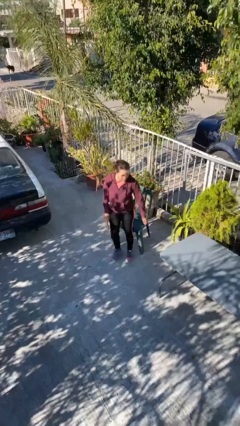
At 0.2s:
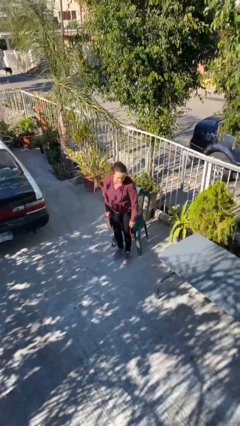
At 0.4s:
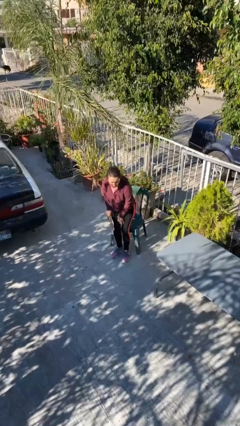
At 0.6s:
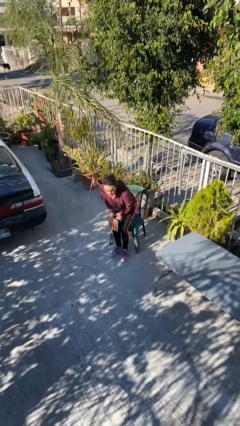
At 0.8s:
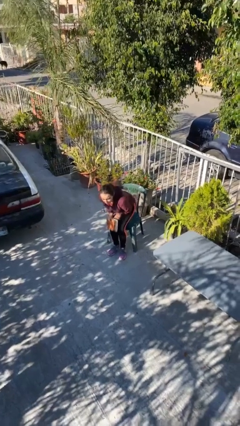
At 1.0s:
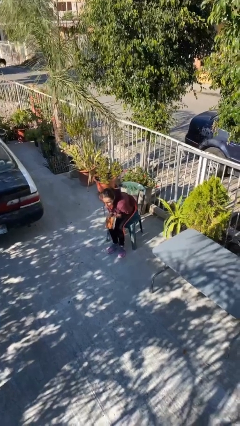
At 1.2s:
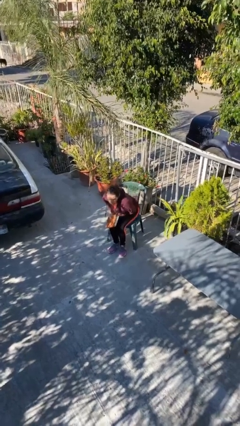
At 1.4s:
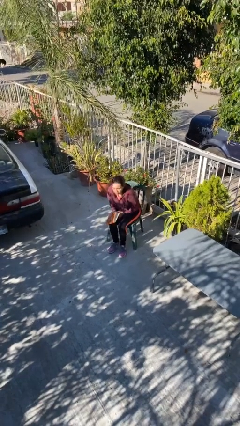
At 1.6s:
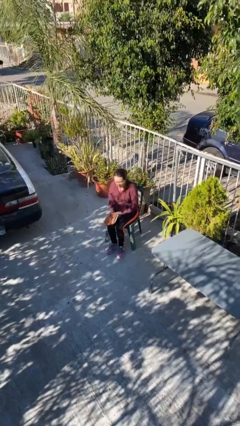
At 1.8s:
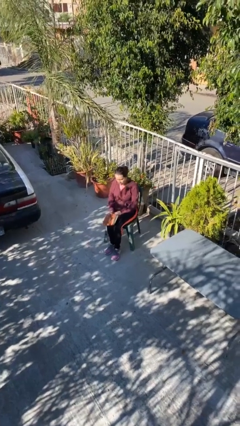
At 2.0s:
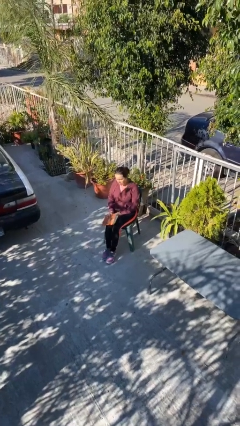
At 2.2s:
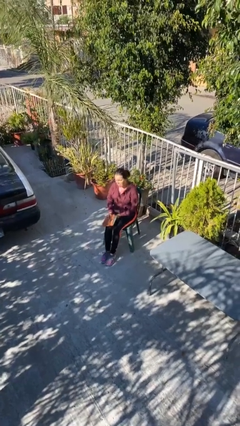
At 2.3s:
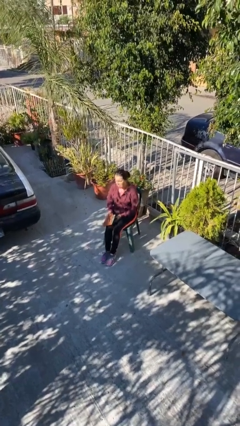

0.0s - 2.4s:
person sits down

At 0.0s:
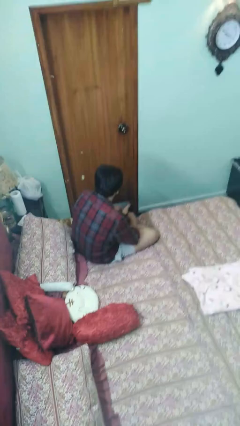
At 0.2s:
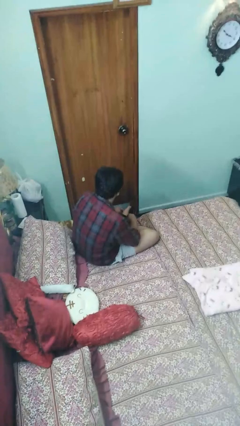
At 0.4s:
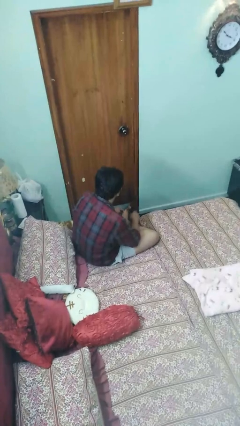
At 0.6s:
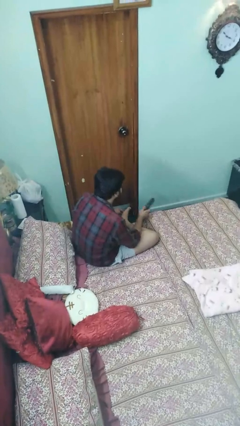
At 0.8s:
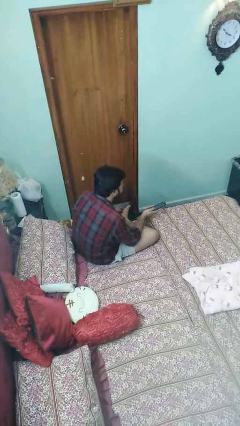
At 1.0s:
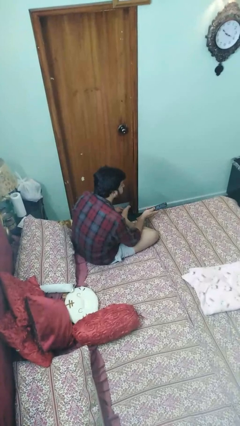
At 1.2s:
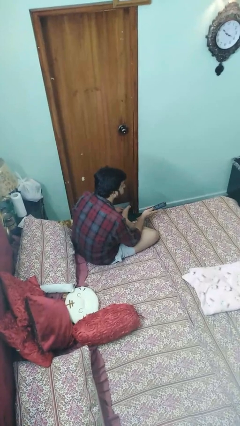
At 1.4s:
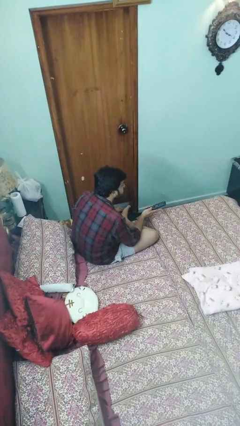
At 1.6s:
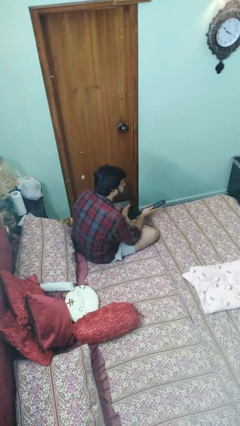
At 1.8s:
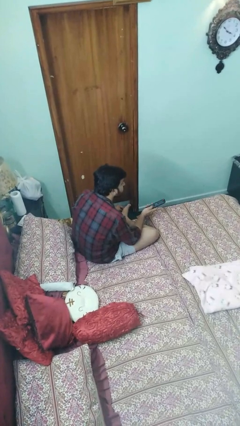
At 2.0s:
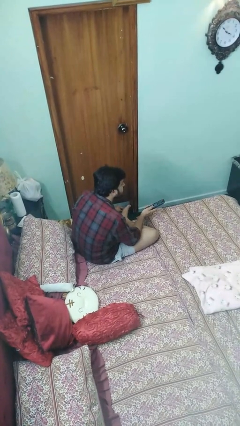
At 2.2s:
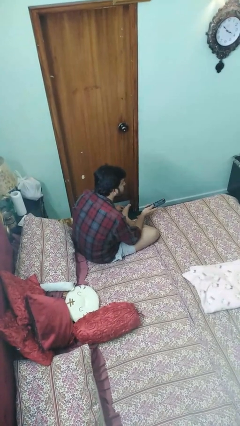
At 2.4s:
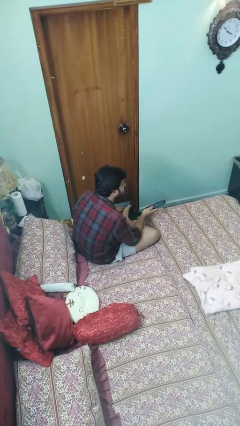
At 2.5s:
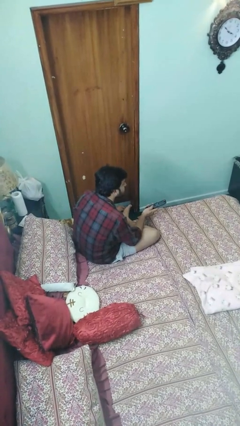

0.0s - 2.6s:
person uses television remote

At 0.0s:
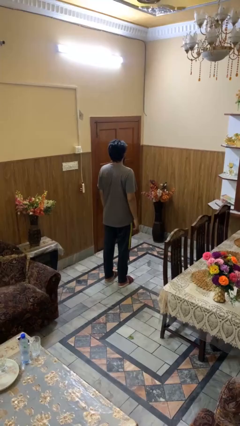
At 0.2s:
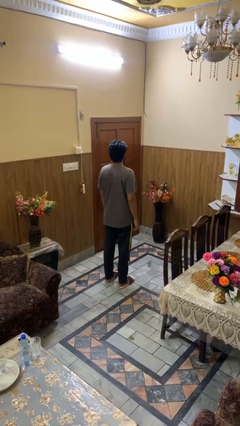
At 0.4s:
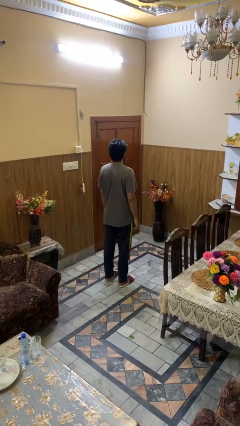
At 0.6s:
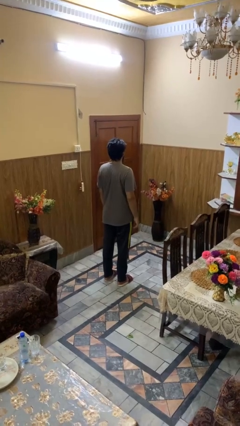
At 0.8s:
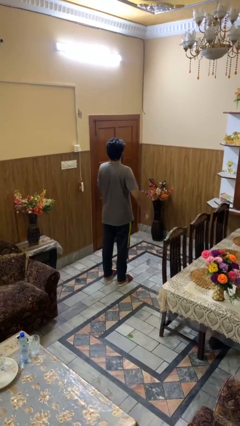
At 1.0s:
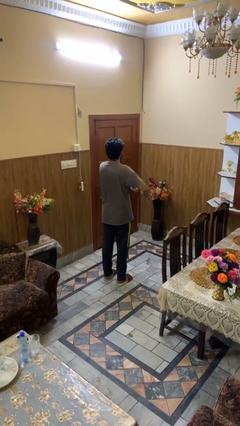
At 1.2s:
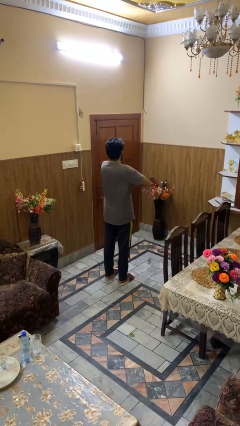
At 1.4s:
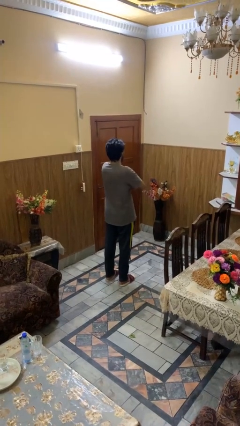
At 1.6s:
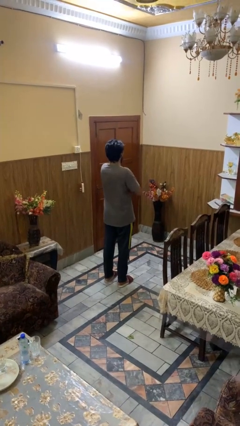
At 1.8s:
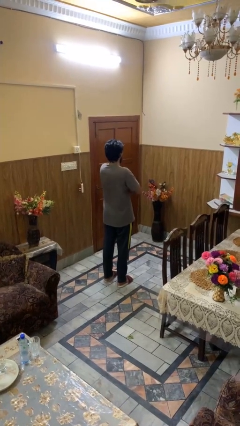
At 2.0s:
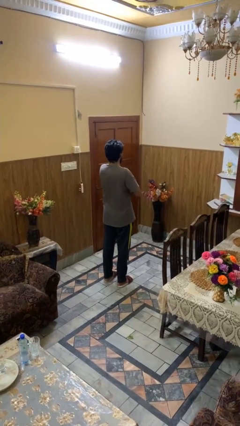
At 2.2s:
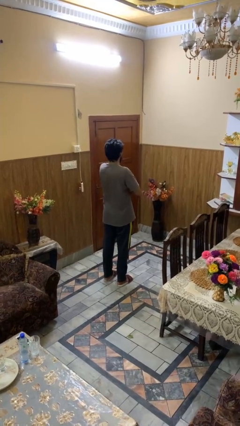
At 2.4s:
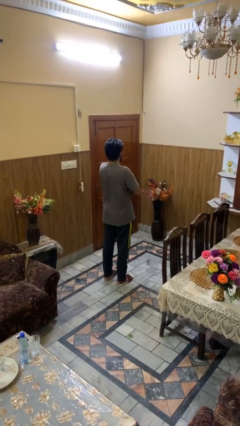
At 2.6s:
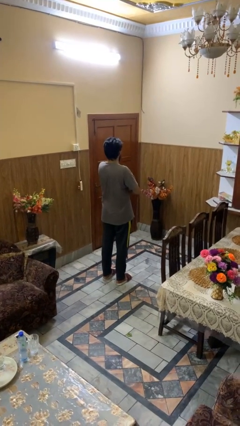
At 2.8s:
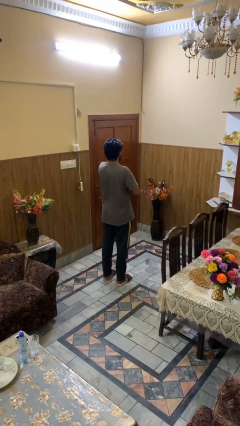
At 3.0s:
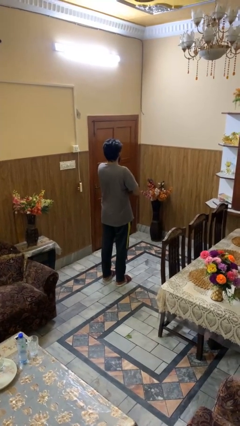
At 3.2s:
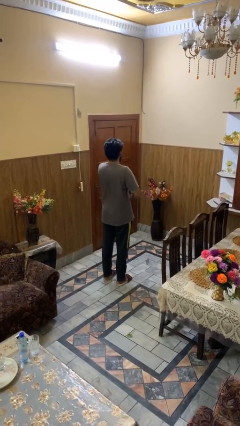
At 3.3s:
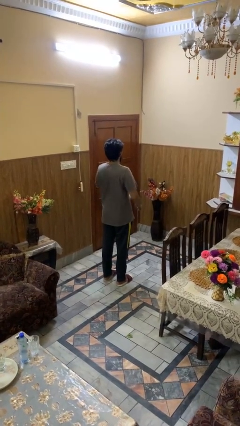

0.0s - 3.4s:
person crosses arms

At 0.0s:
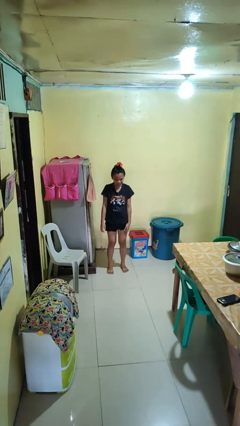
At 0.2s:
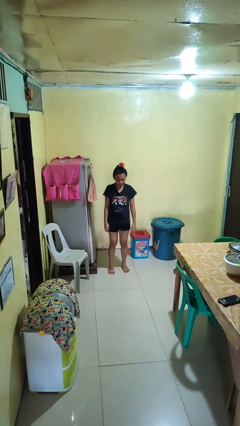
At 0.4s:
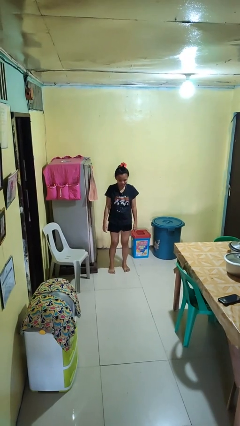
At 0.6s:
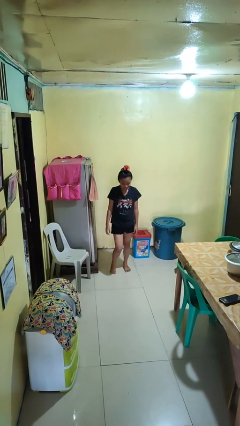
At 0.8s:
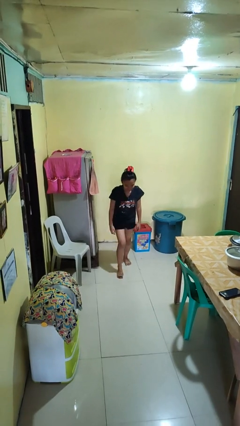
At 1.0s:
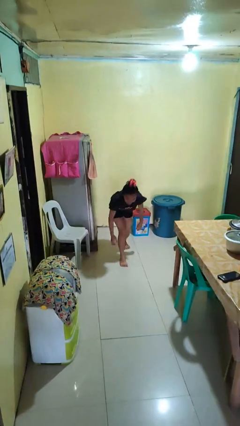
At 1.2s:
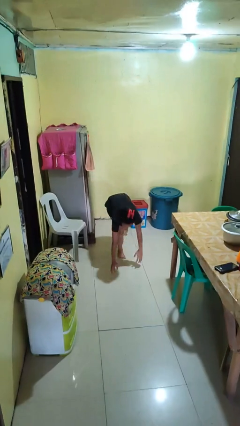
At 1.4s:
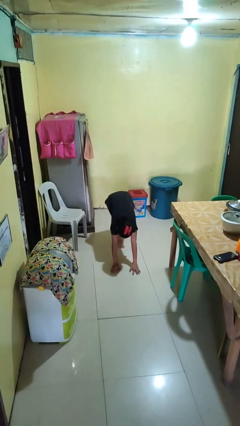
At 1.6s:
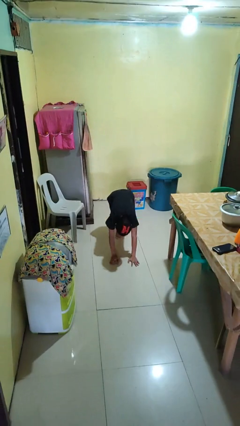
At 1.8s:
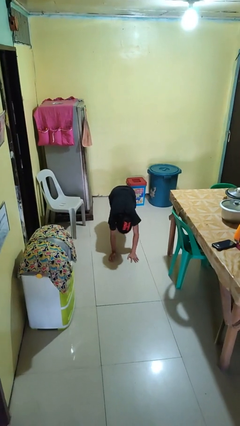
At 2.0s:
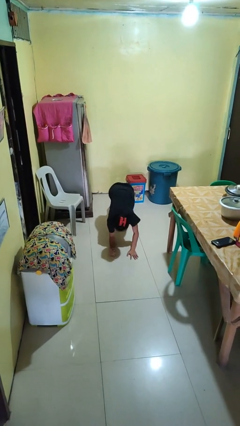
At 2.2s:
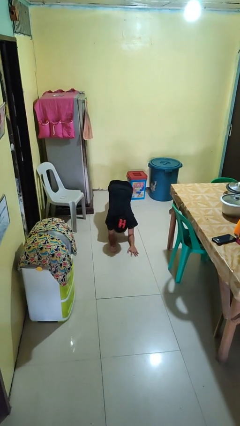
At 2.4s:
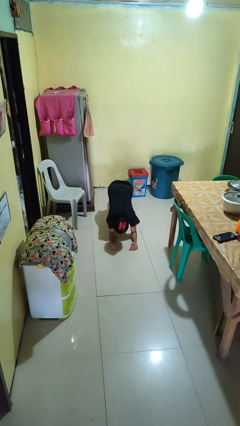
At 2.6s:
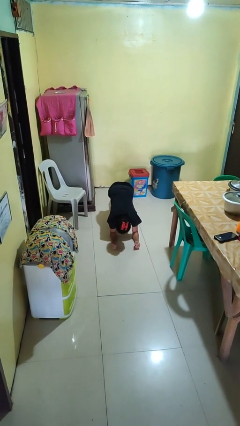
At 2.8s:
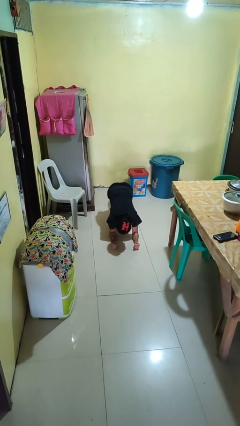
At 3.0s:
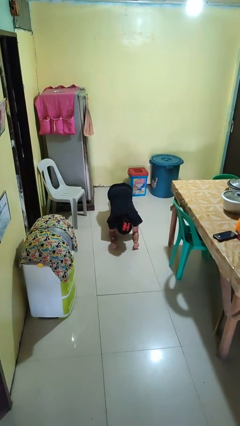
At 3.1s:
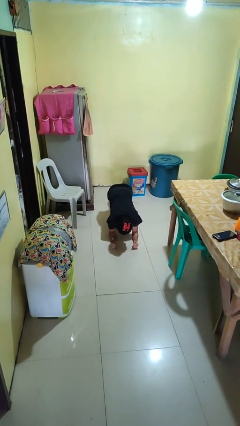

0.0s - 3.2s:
person exercises with plank

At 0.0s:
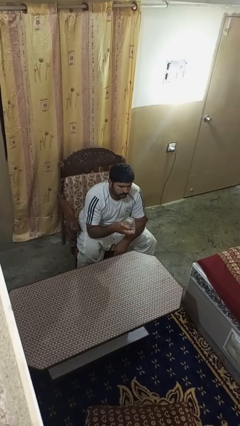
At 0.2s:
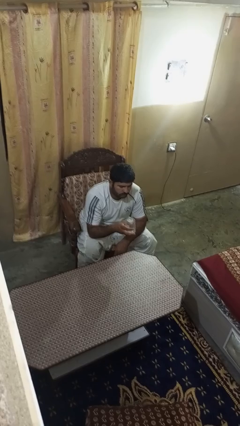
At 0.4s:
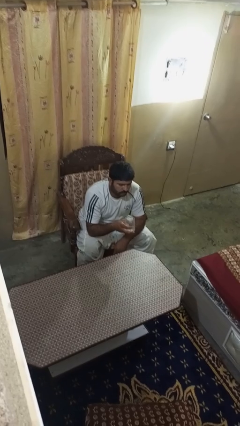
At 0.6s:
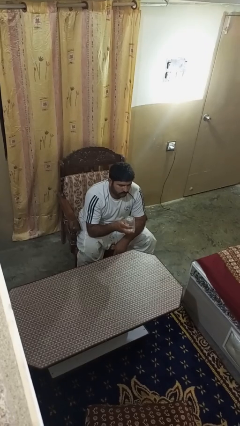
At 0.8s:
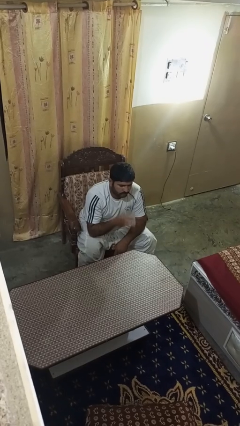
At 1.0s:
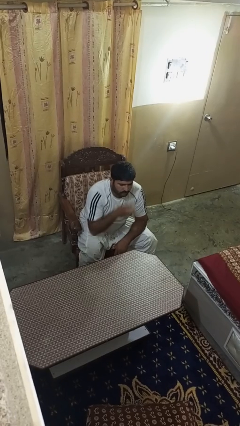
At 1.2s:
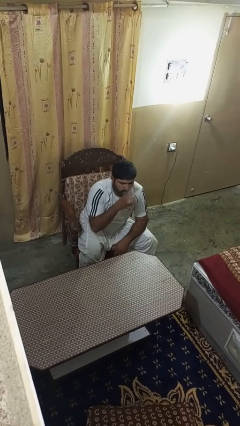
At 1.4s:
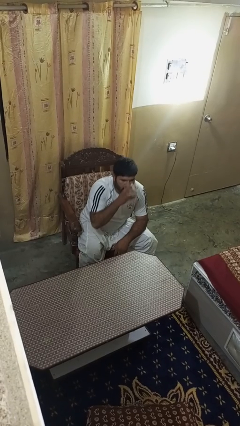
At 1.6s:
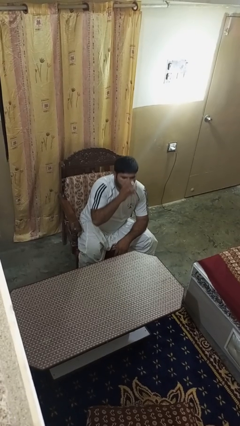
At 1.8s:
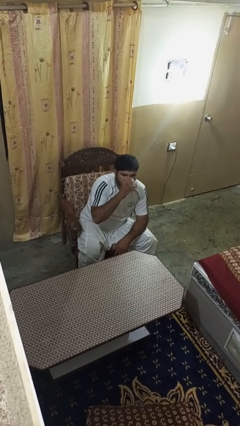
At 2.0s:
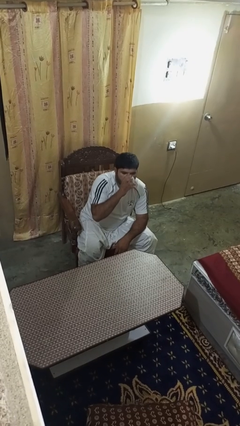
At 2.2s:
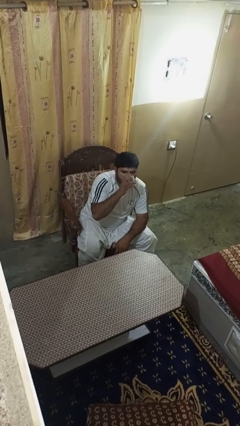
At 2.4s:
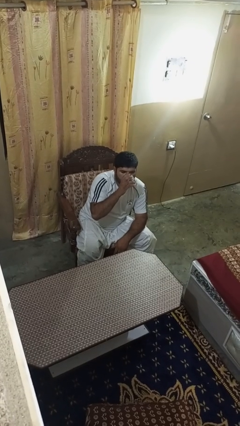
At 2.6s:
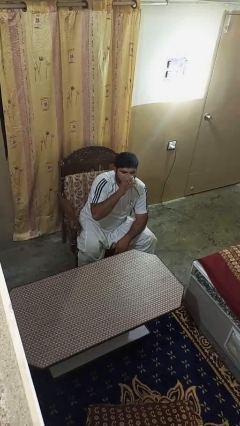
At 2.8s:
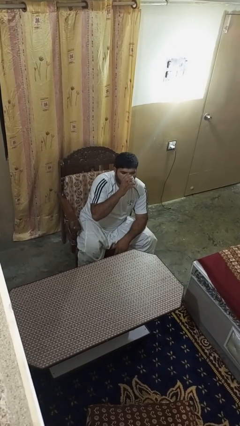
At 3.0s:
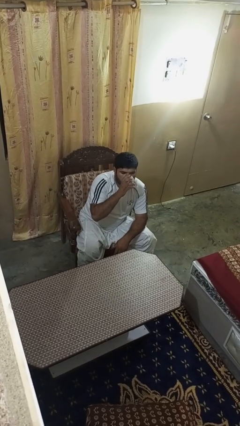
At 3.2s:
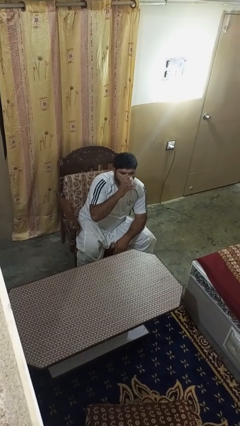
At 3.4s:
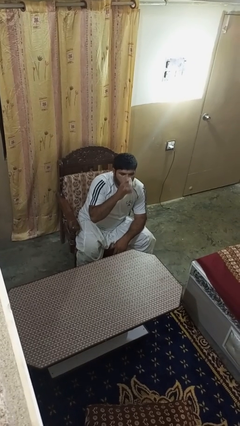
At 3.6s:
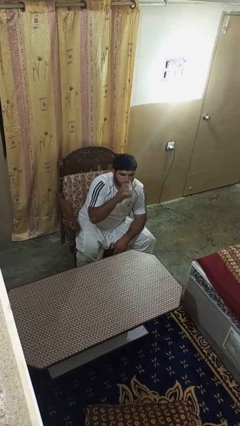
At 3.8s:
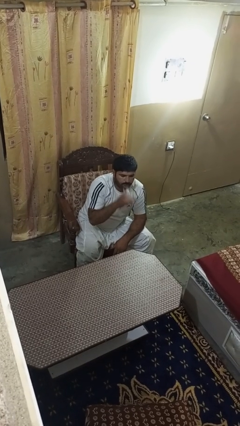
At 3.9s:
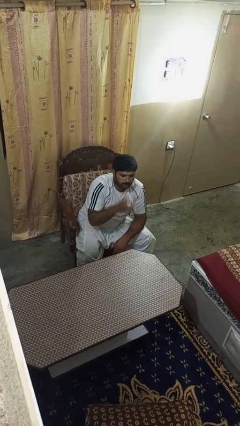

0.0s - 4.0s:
person drinks from shotglass

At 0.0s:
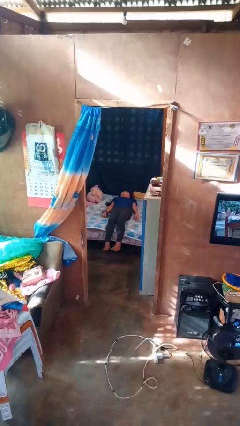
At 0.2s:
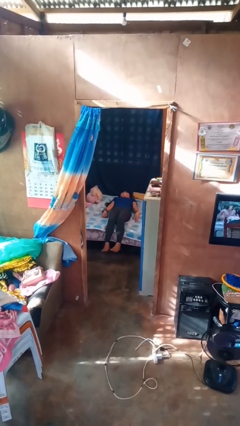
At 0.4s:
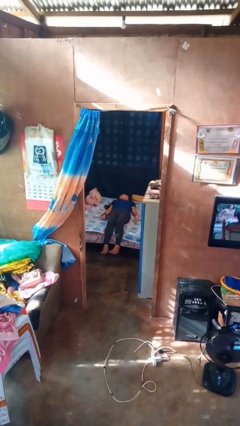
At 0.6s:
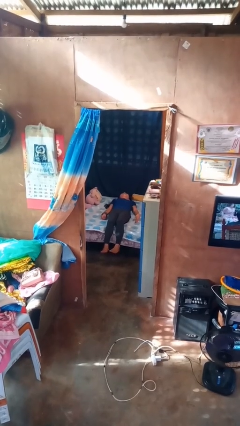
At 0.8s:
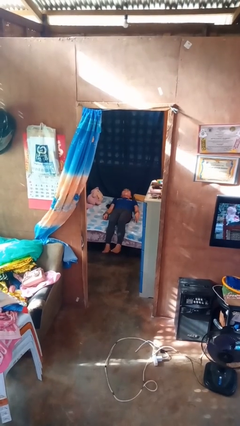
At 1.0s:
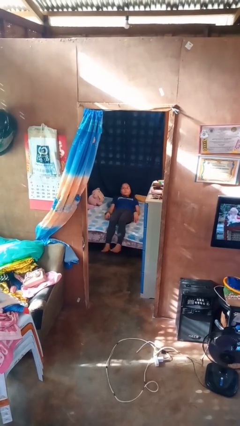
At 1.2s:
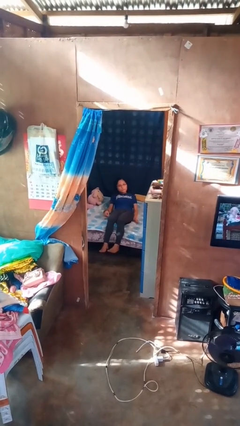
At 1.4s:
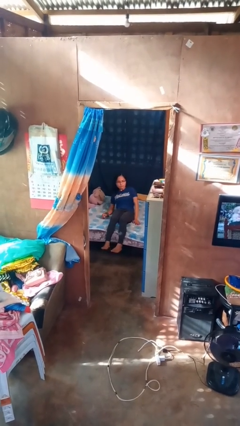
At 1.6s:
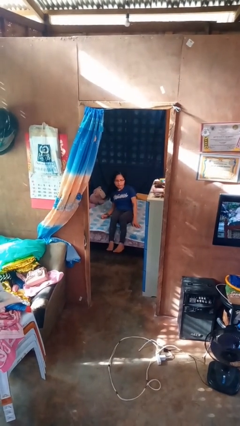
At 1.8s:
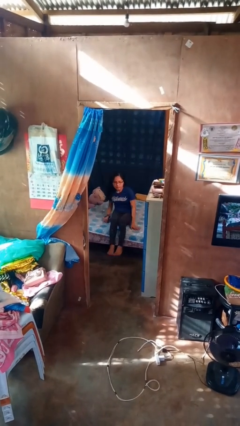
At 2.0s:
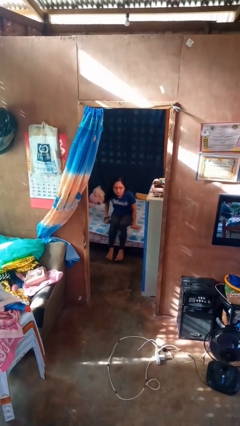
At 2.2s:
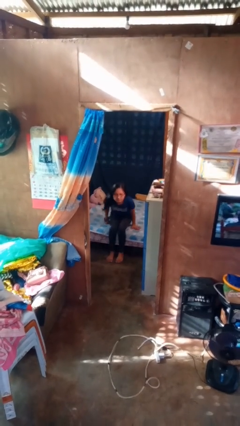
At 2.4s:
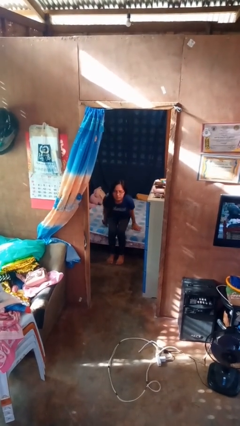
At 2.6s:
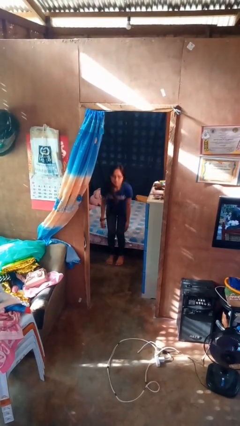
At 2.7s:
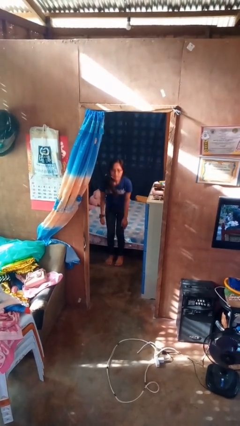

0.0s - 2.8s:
person stands up
